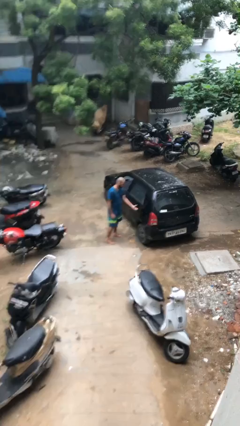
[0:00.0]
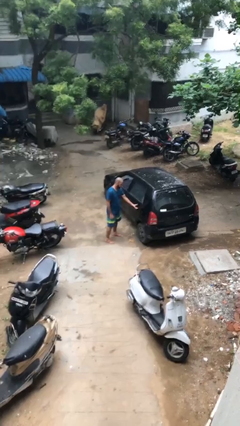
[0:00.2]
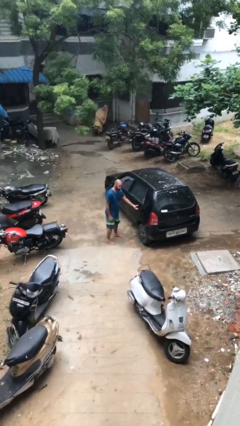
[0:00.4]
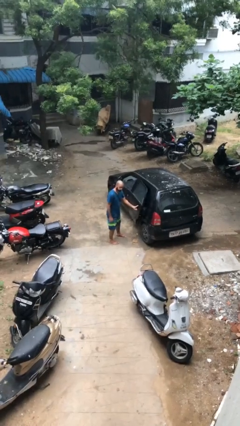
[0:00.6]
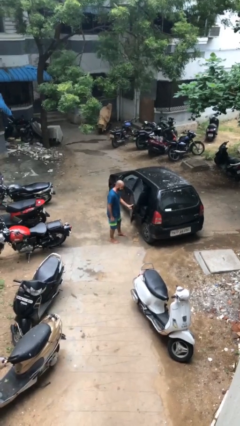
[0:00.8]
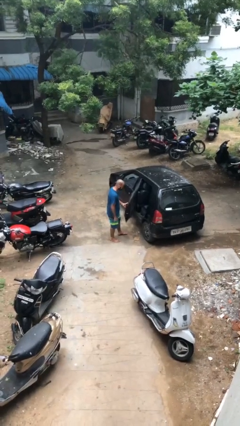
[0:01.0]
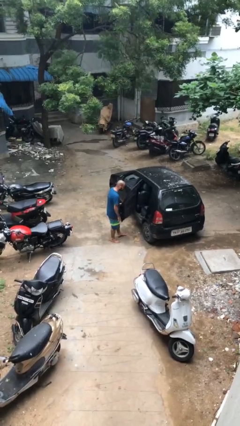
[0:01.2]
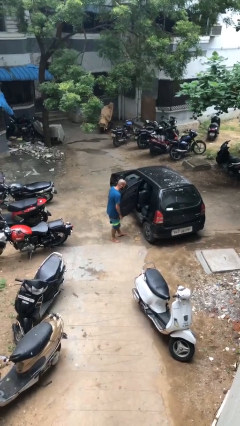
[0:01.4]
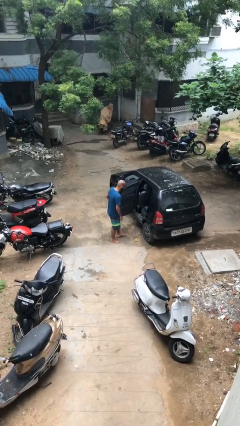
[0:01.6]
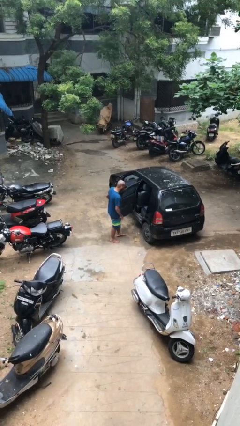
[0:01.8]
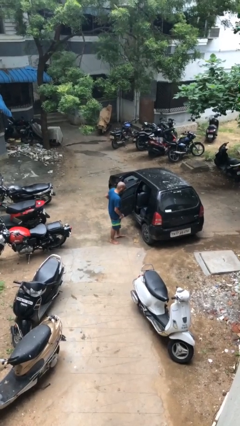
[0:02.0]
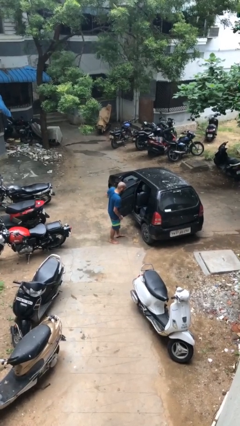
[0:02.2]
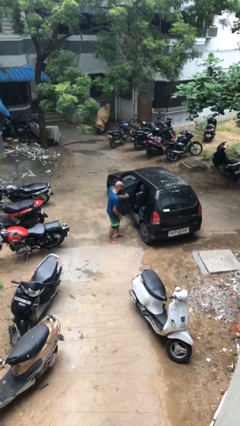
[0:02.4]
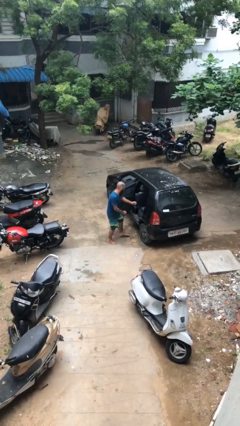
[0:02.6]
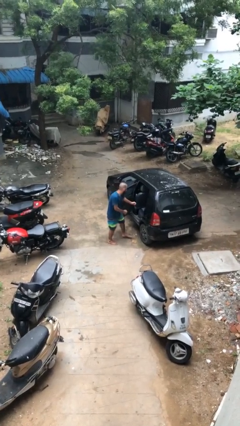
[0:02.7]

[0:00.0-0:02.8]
person opens car door

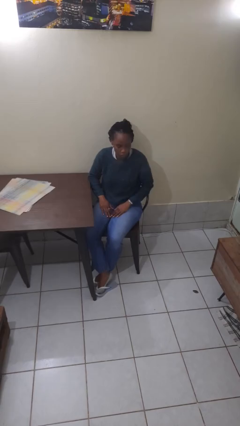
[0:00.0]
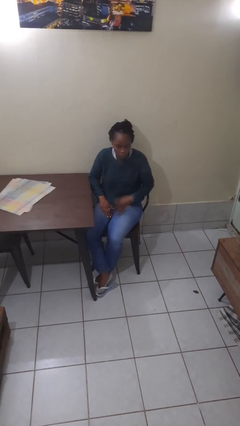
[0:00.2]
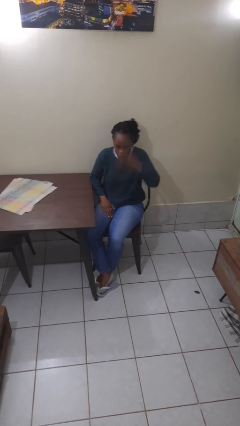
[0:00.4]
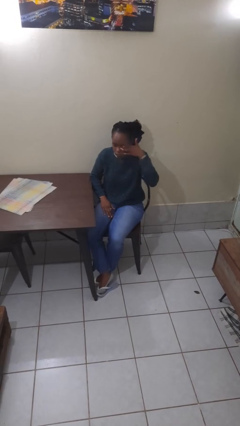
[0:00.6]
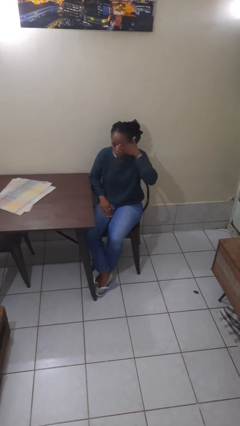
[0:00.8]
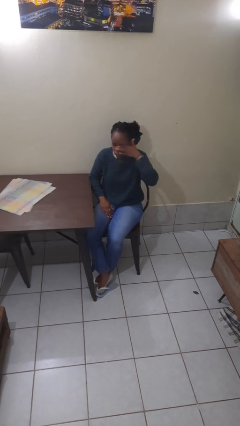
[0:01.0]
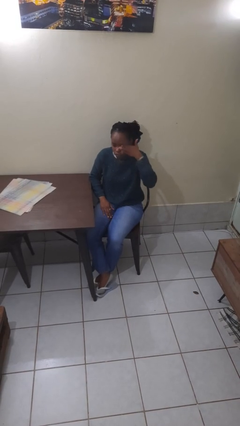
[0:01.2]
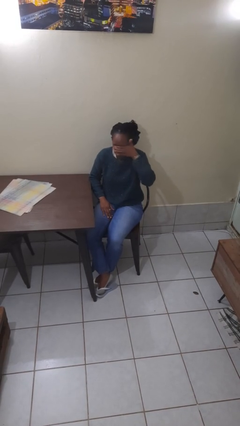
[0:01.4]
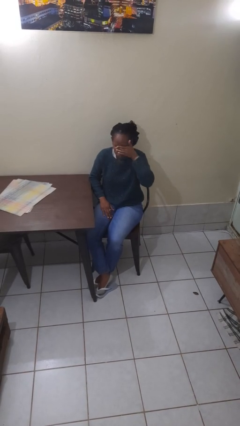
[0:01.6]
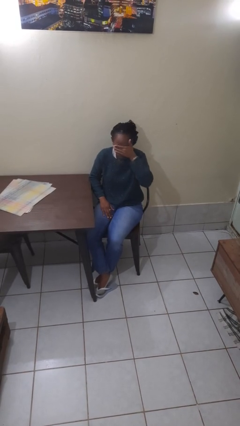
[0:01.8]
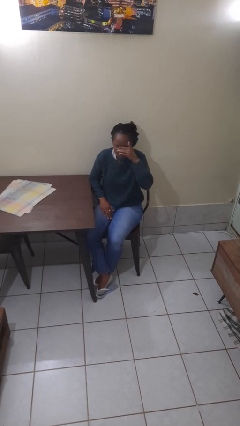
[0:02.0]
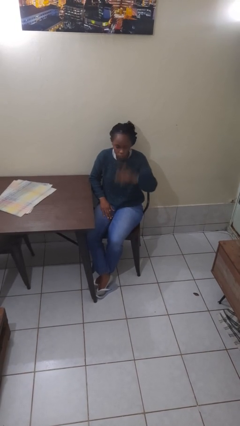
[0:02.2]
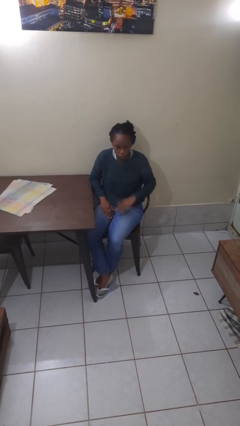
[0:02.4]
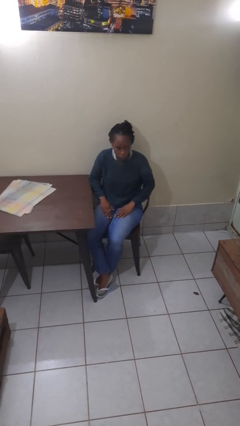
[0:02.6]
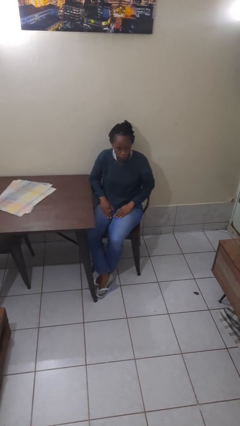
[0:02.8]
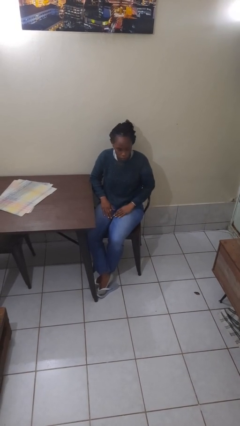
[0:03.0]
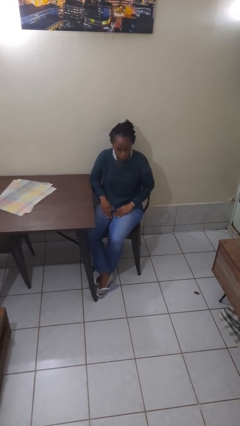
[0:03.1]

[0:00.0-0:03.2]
person rubs eyes

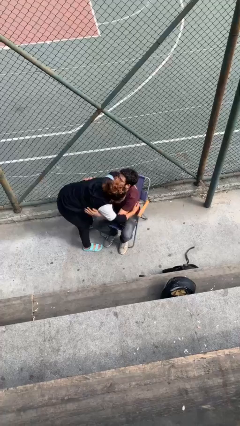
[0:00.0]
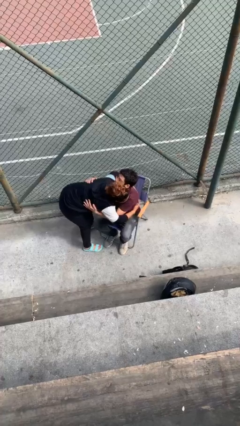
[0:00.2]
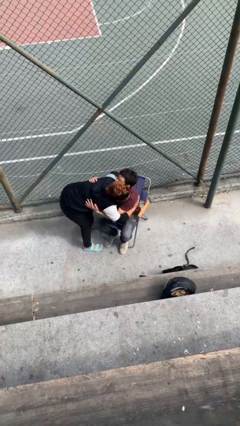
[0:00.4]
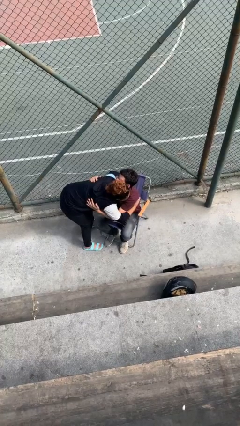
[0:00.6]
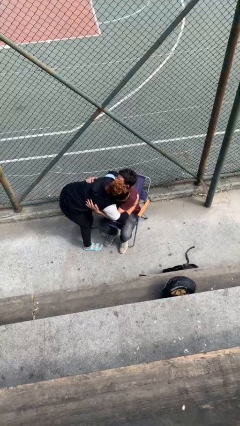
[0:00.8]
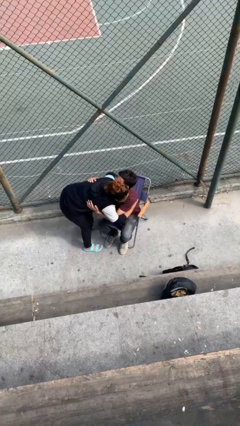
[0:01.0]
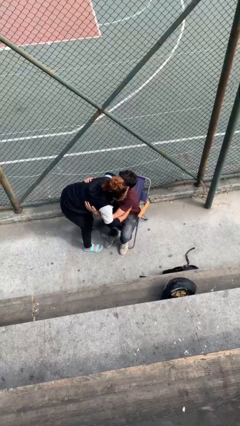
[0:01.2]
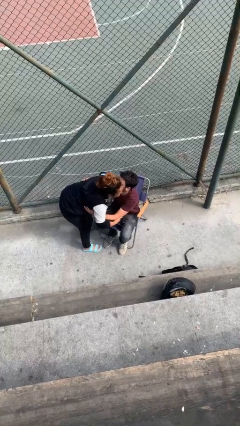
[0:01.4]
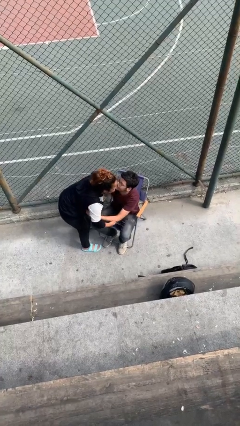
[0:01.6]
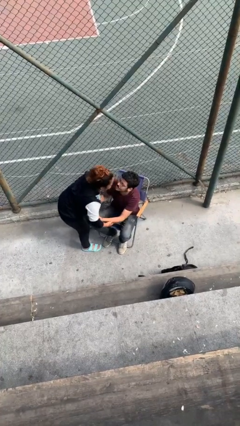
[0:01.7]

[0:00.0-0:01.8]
person embraces person

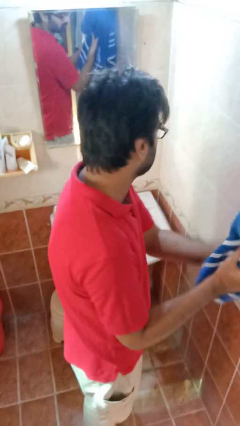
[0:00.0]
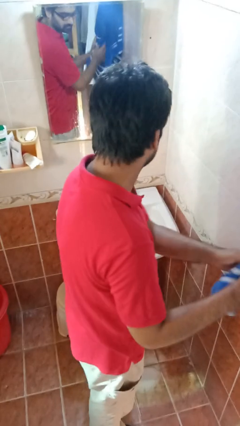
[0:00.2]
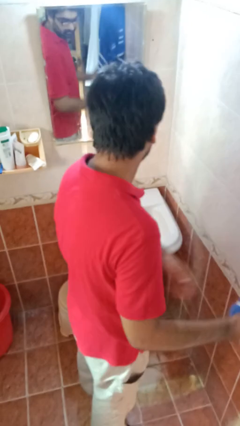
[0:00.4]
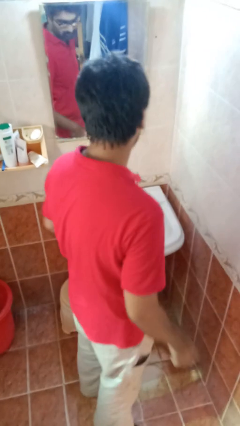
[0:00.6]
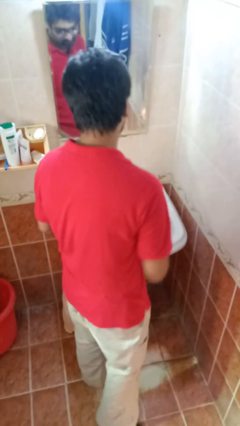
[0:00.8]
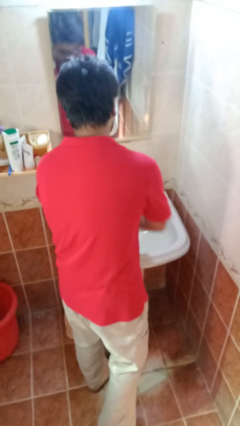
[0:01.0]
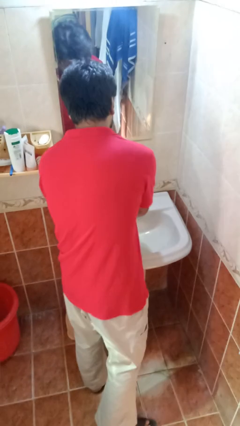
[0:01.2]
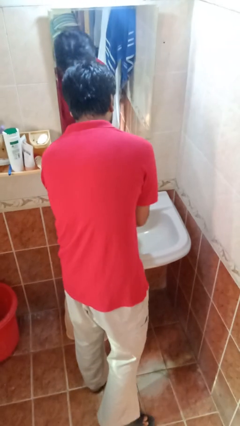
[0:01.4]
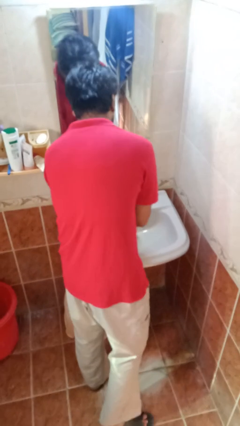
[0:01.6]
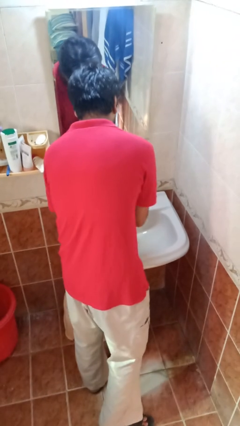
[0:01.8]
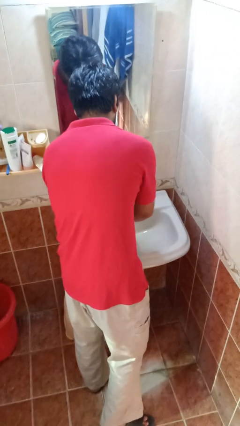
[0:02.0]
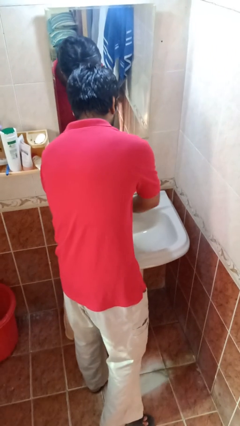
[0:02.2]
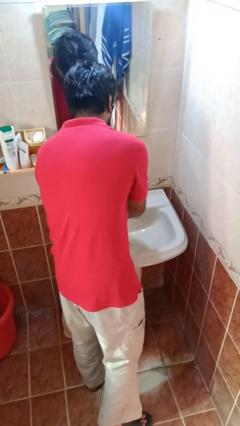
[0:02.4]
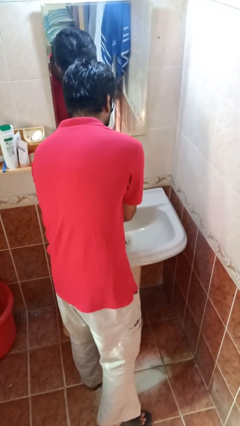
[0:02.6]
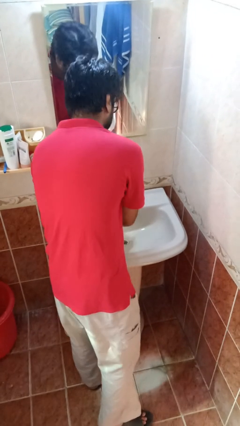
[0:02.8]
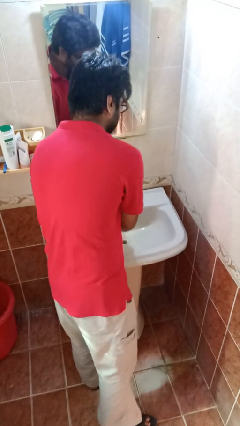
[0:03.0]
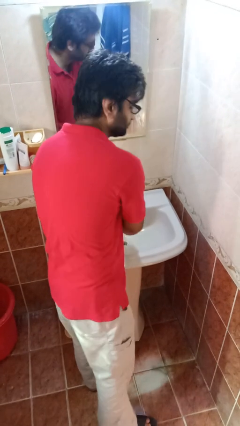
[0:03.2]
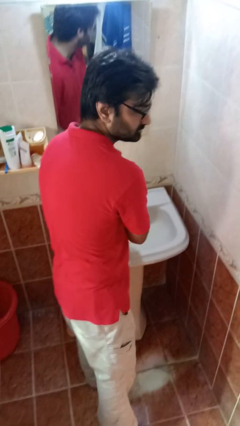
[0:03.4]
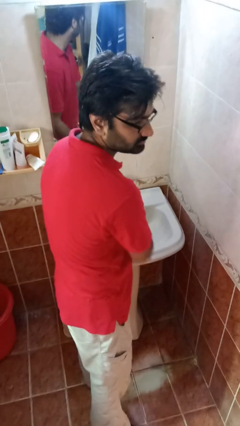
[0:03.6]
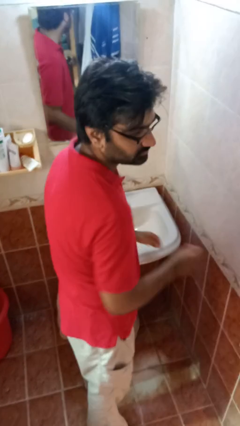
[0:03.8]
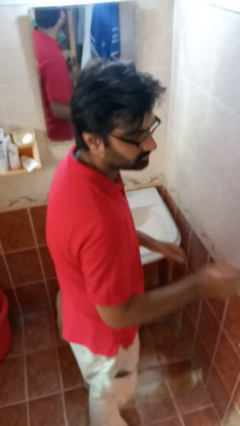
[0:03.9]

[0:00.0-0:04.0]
person washes hands

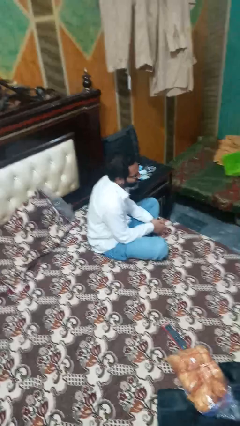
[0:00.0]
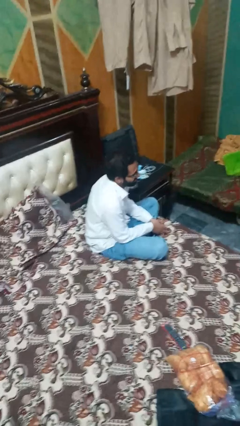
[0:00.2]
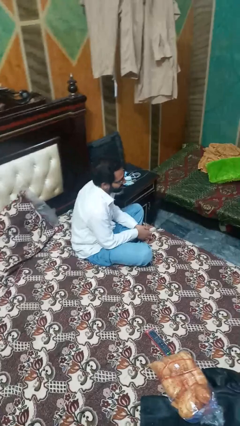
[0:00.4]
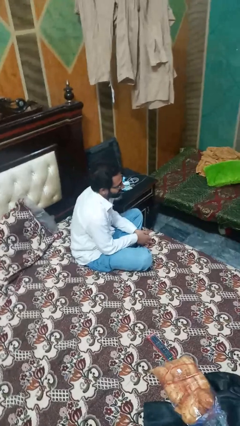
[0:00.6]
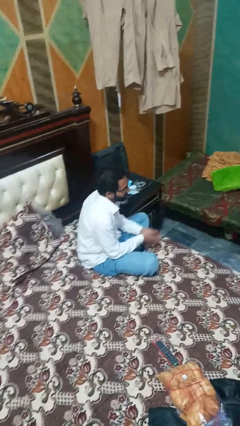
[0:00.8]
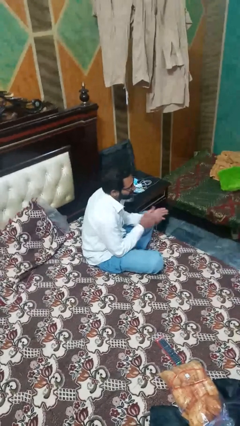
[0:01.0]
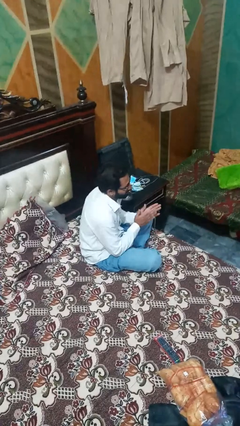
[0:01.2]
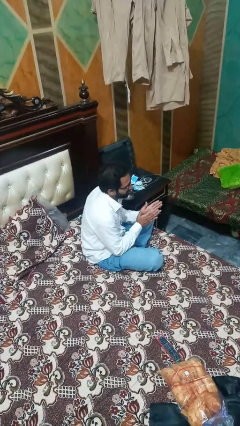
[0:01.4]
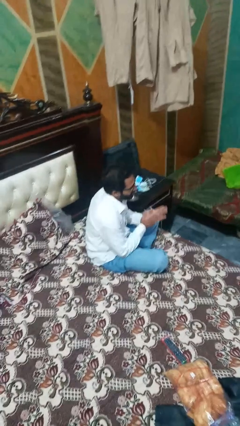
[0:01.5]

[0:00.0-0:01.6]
person claps hands

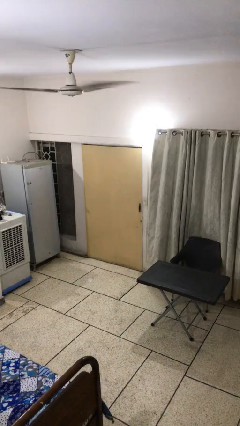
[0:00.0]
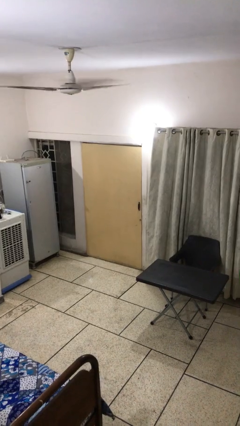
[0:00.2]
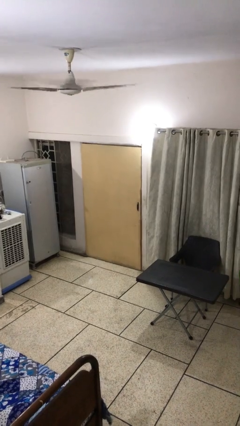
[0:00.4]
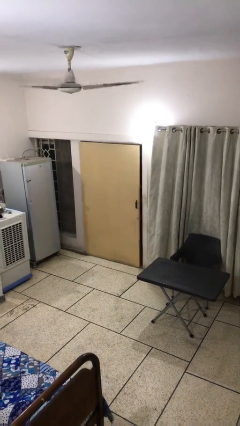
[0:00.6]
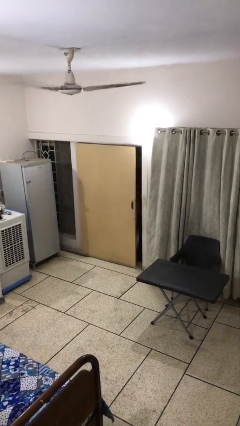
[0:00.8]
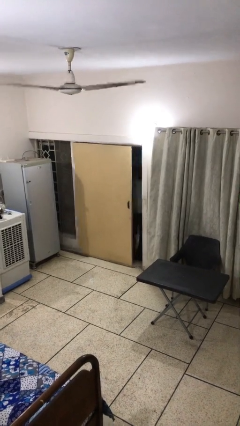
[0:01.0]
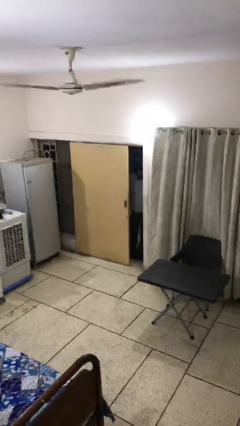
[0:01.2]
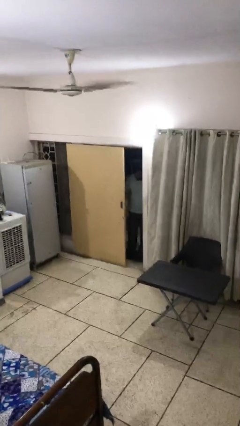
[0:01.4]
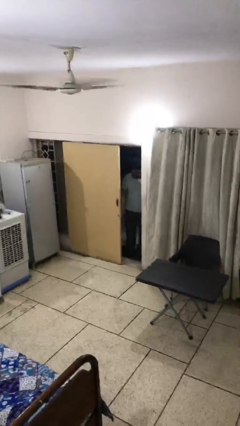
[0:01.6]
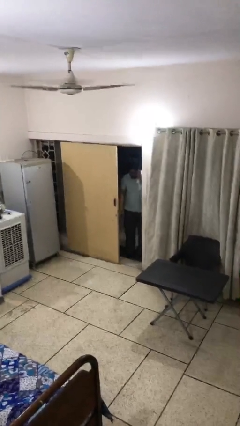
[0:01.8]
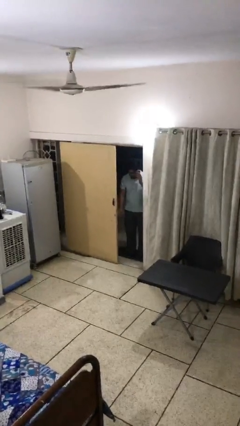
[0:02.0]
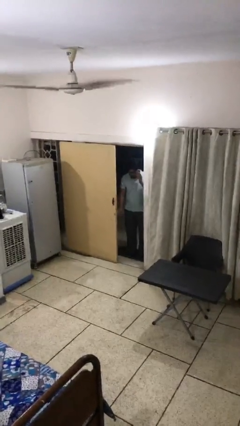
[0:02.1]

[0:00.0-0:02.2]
person opens facility door

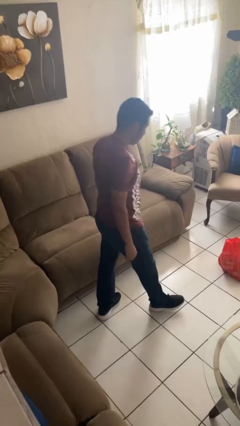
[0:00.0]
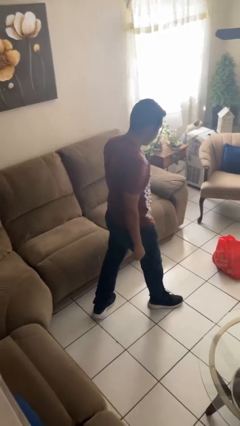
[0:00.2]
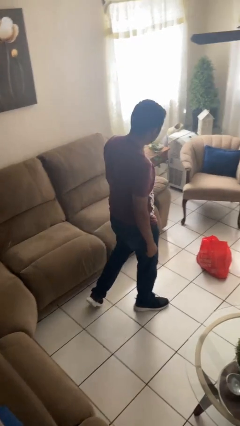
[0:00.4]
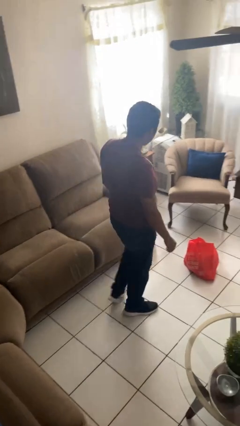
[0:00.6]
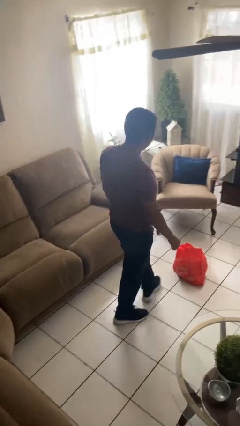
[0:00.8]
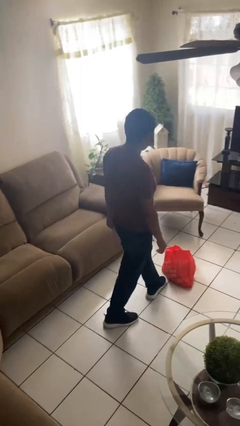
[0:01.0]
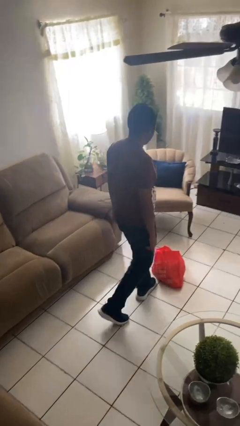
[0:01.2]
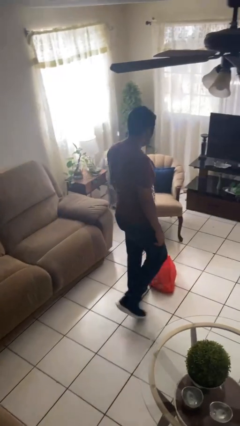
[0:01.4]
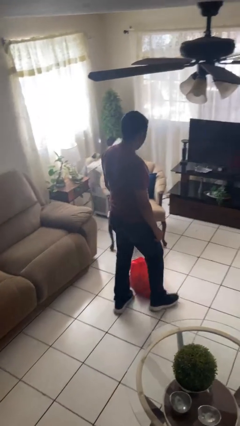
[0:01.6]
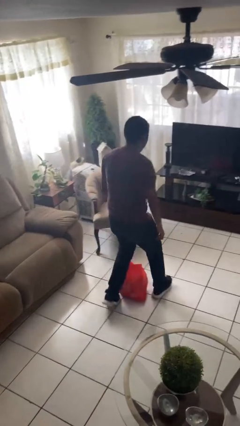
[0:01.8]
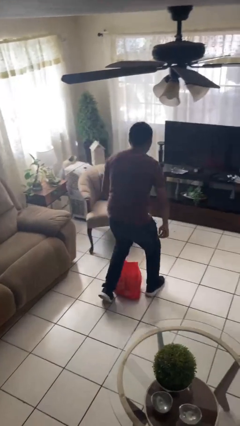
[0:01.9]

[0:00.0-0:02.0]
person trips on object on floor
